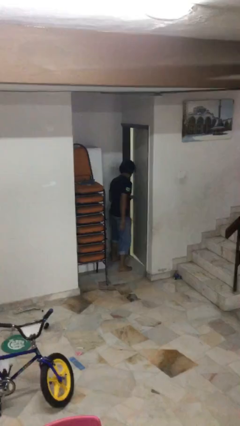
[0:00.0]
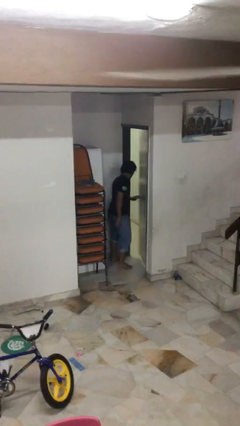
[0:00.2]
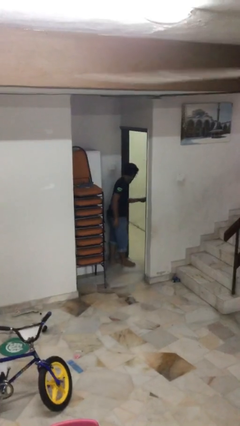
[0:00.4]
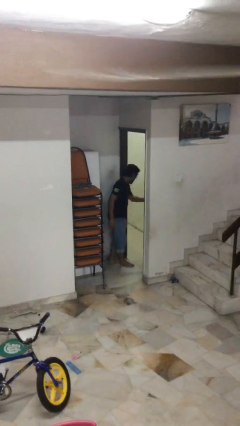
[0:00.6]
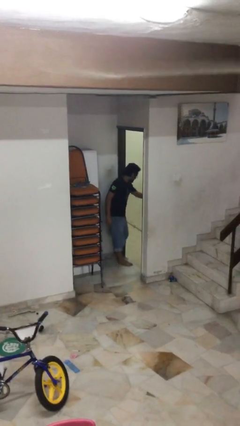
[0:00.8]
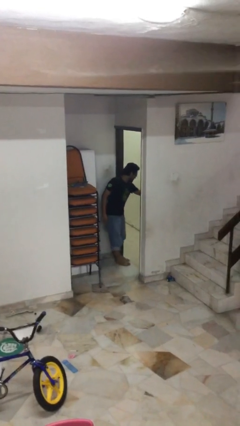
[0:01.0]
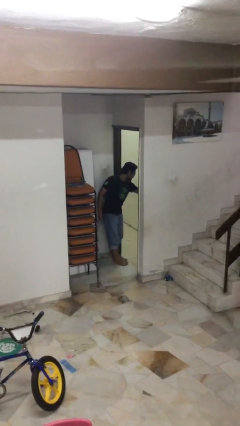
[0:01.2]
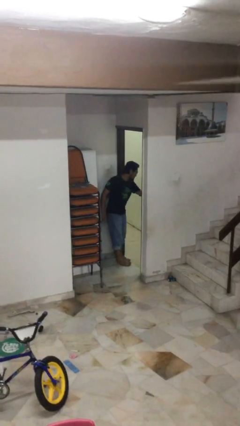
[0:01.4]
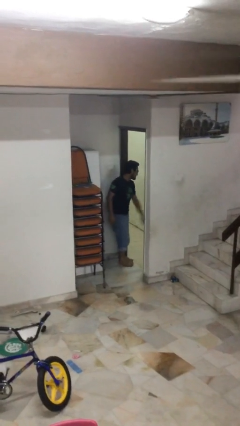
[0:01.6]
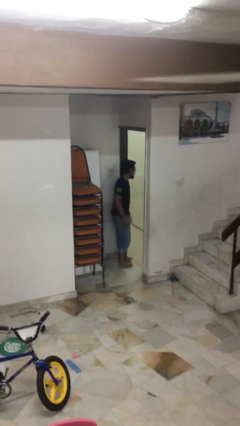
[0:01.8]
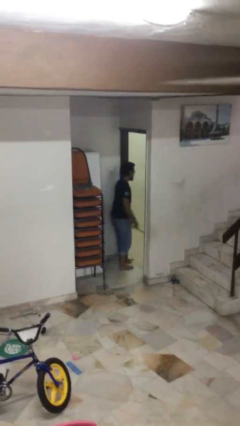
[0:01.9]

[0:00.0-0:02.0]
person opens facility door

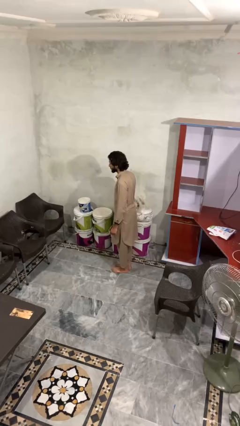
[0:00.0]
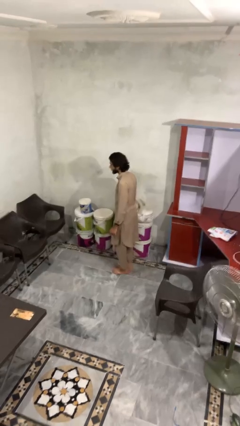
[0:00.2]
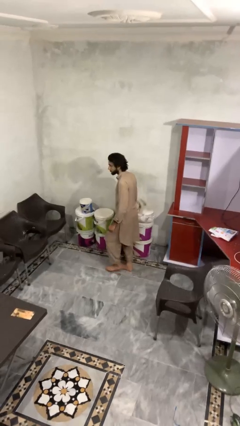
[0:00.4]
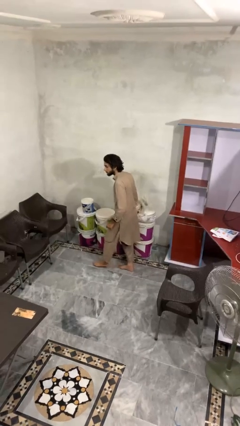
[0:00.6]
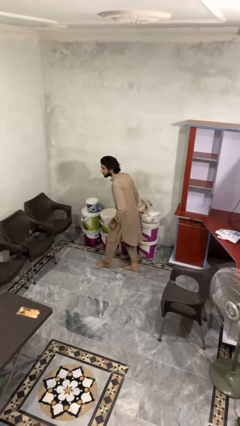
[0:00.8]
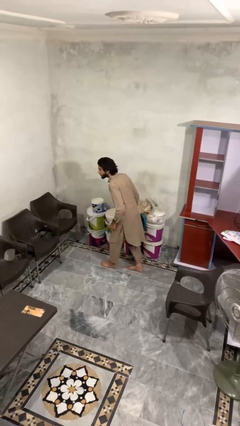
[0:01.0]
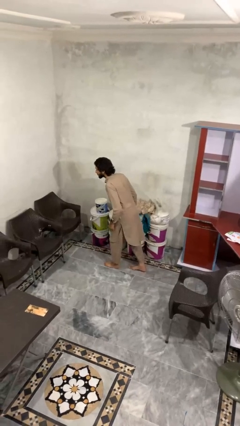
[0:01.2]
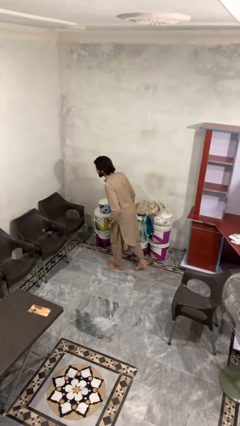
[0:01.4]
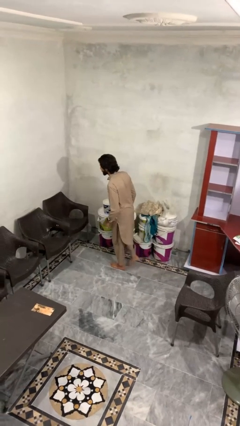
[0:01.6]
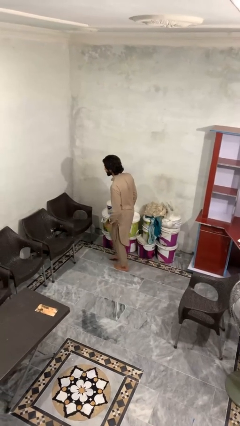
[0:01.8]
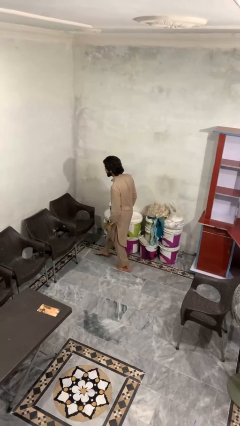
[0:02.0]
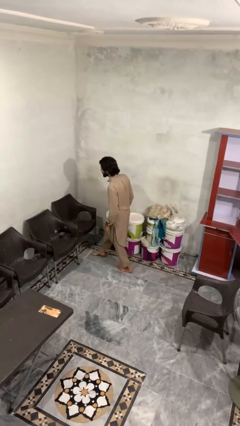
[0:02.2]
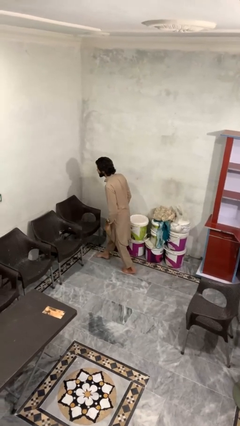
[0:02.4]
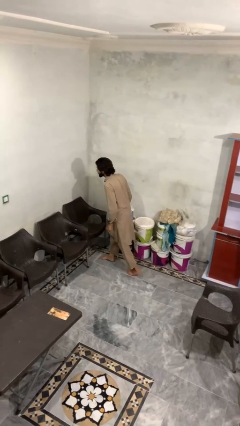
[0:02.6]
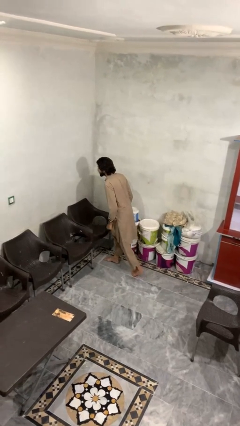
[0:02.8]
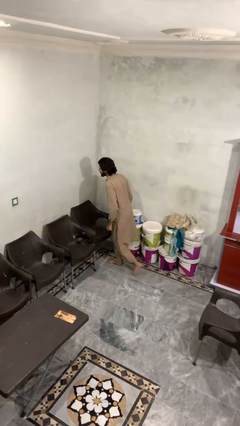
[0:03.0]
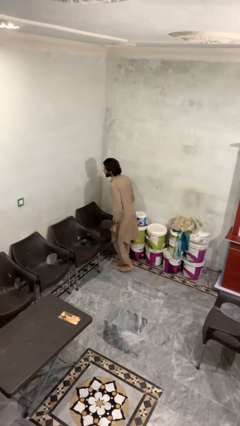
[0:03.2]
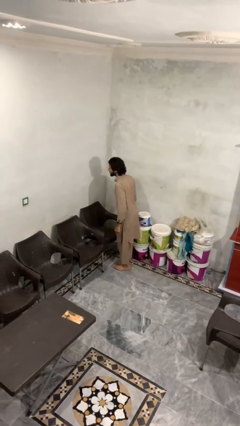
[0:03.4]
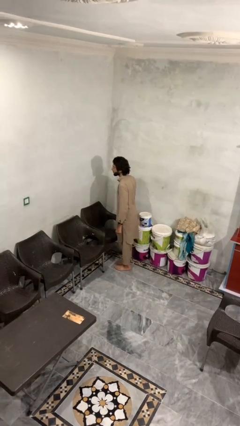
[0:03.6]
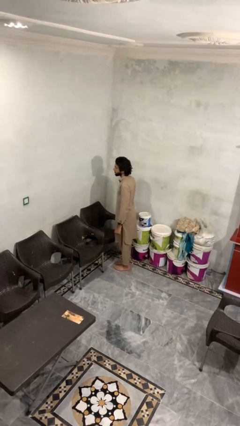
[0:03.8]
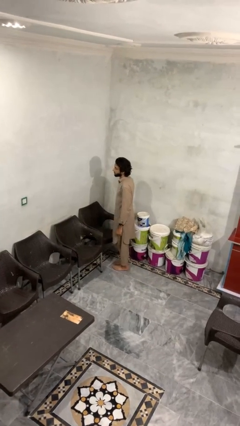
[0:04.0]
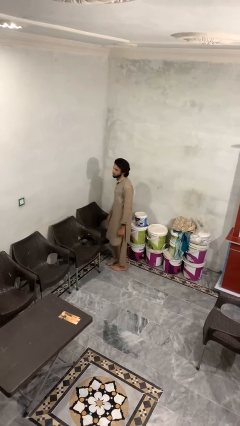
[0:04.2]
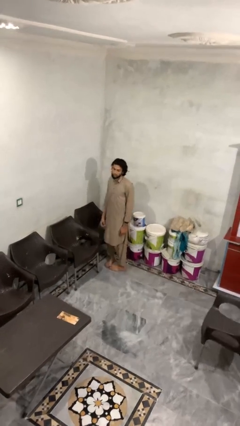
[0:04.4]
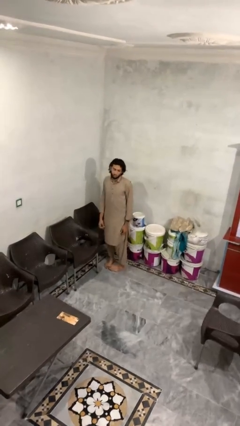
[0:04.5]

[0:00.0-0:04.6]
person walks tiptoe

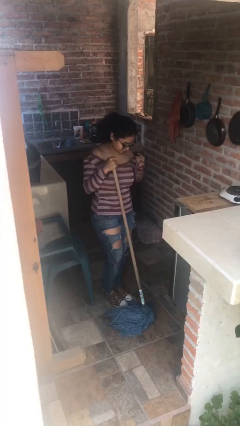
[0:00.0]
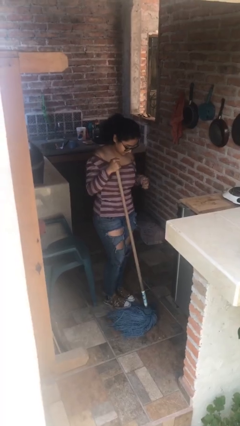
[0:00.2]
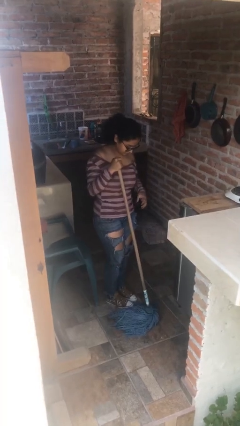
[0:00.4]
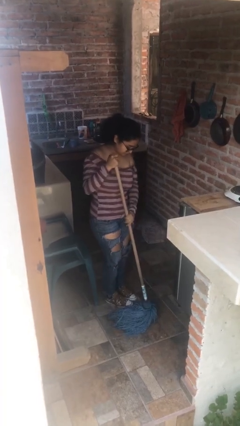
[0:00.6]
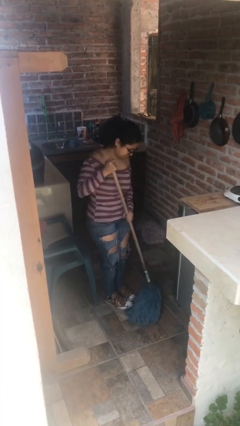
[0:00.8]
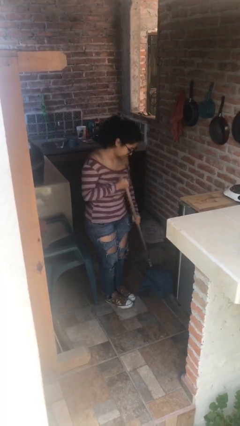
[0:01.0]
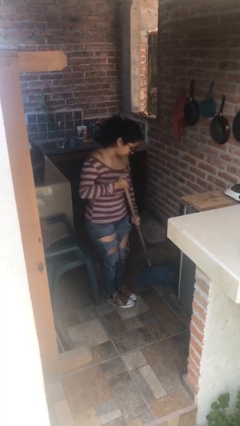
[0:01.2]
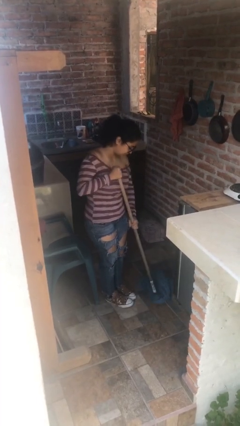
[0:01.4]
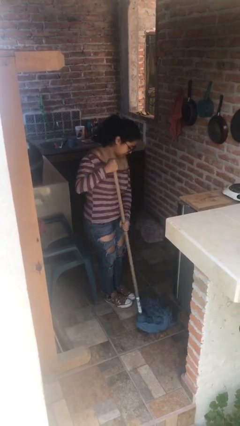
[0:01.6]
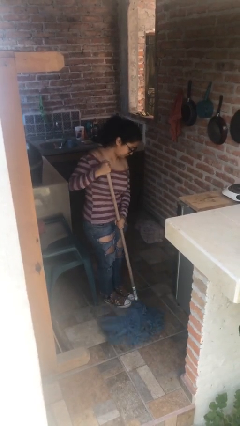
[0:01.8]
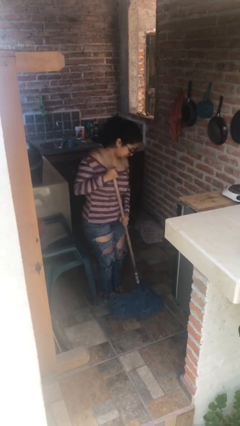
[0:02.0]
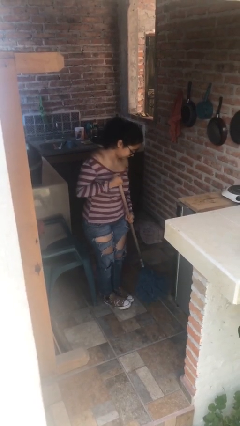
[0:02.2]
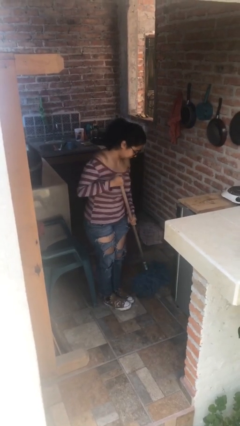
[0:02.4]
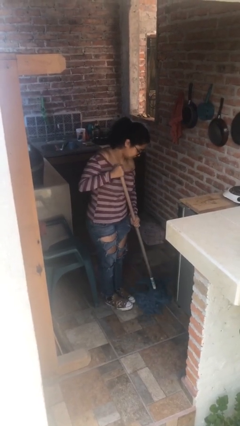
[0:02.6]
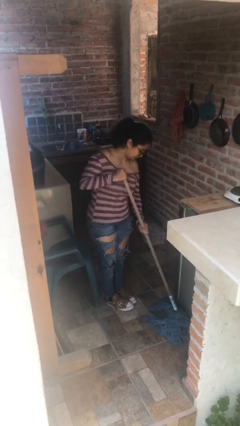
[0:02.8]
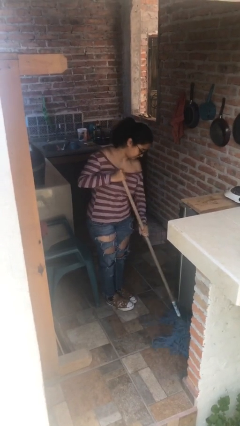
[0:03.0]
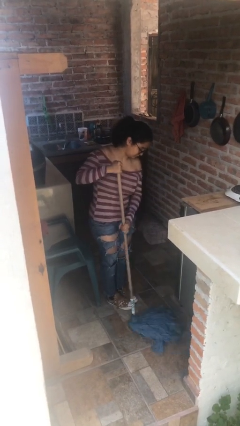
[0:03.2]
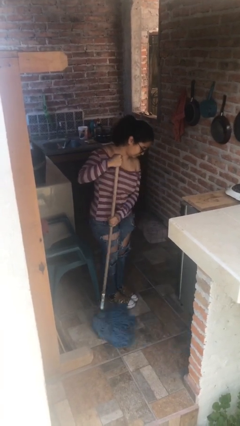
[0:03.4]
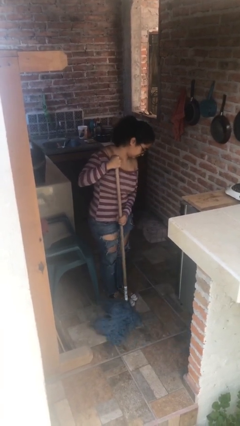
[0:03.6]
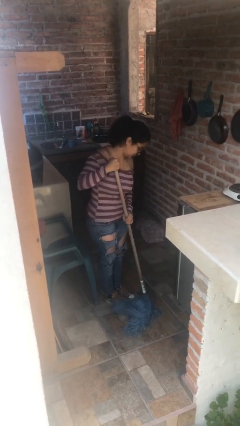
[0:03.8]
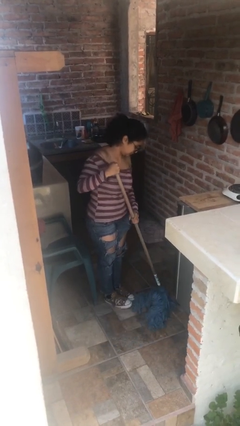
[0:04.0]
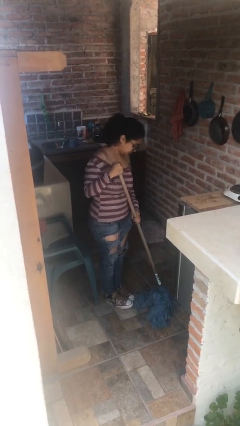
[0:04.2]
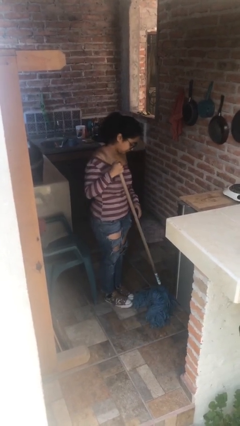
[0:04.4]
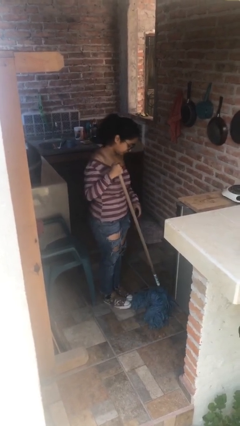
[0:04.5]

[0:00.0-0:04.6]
person mops

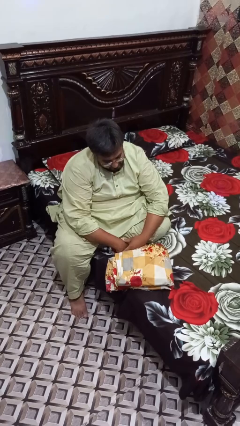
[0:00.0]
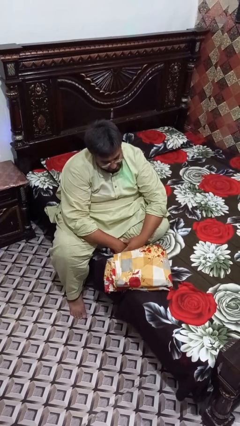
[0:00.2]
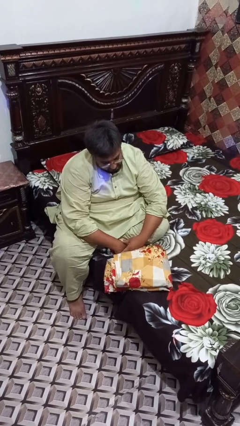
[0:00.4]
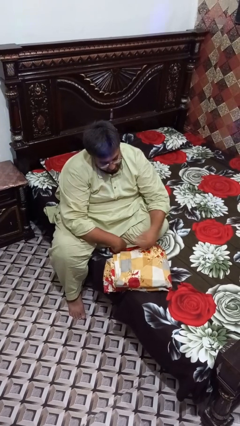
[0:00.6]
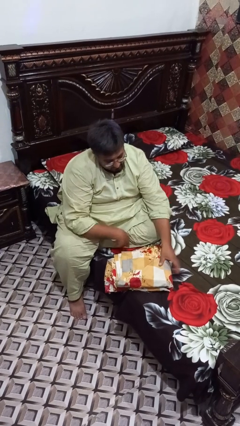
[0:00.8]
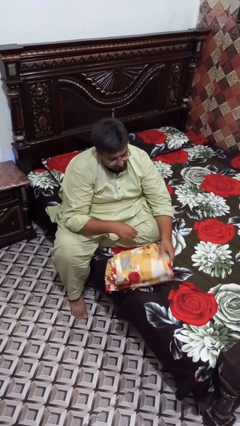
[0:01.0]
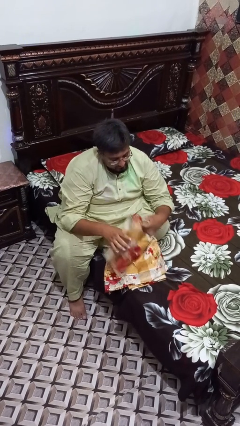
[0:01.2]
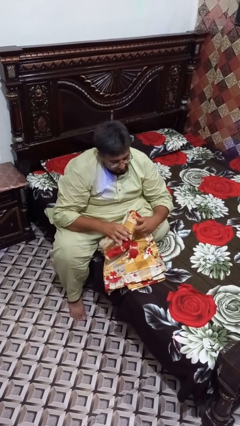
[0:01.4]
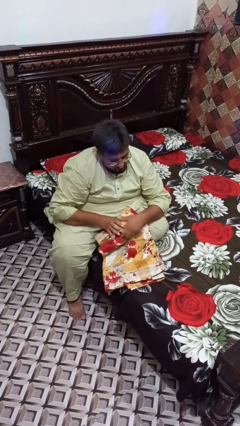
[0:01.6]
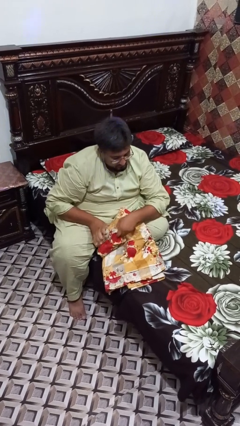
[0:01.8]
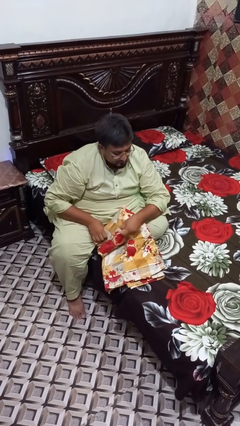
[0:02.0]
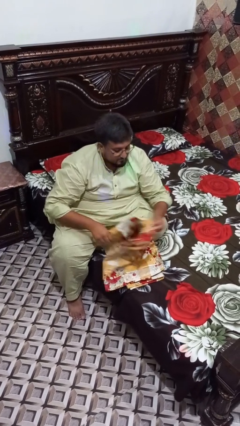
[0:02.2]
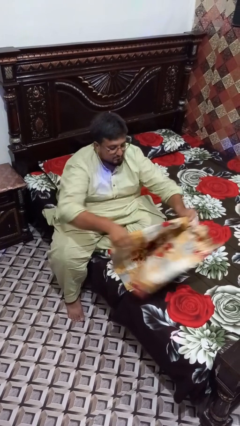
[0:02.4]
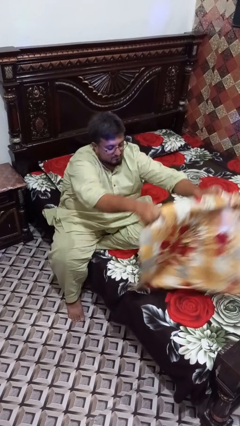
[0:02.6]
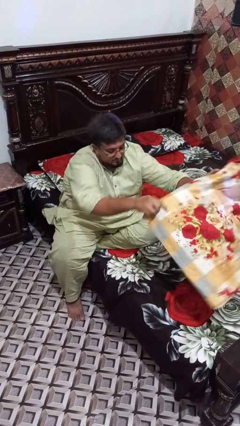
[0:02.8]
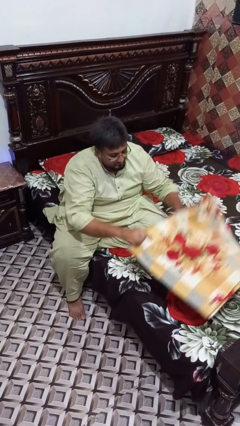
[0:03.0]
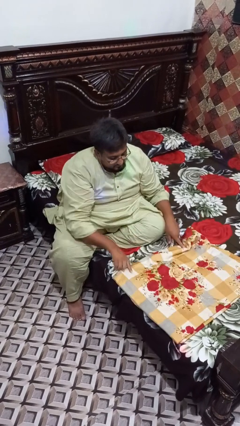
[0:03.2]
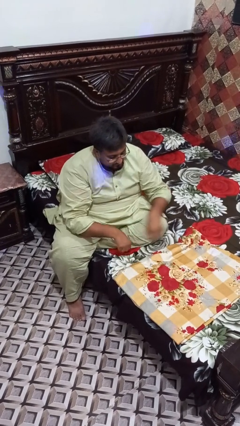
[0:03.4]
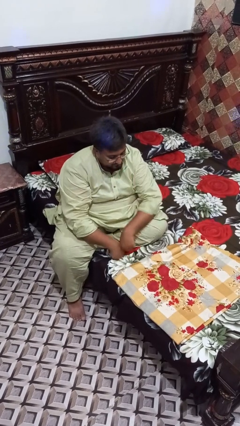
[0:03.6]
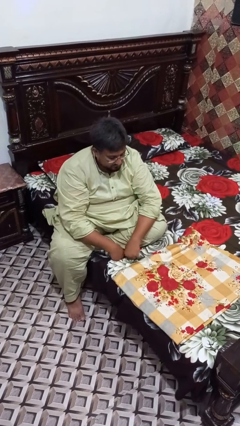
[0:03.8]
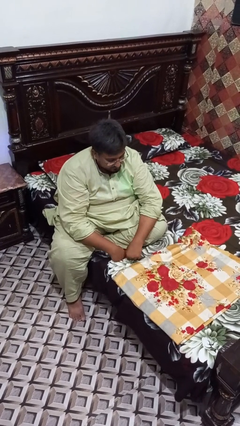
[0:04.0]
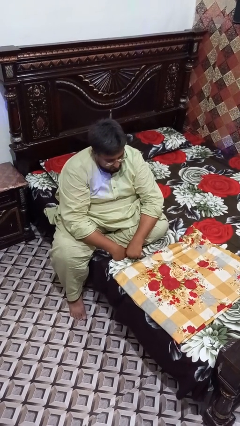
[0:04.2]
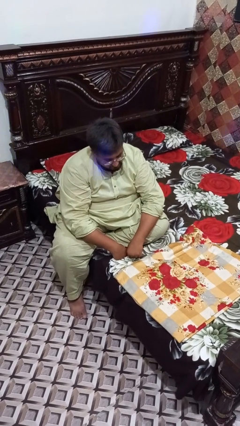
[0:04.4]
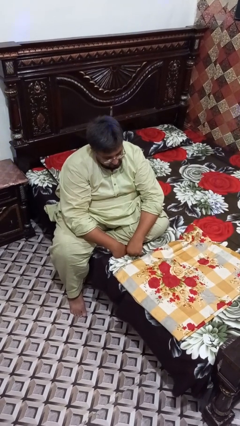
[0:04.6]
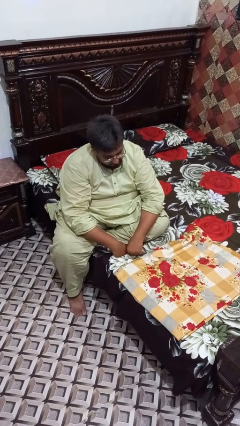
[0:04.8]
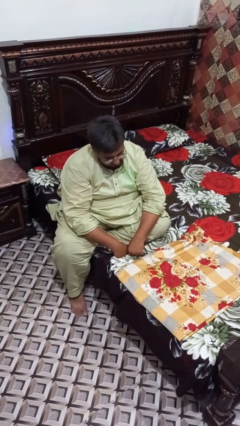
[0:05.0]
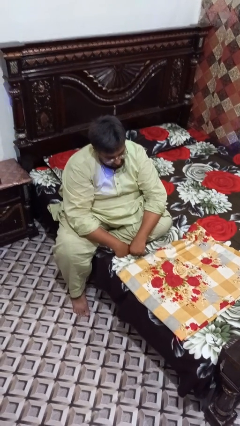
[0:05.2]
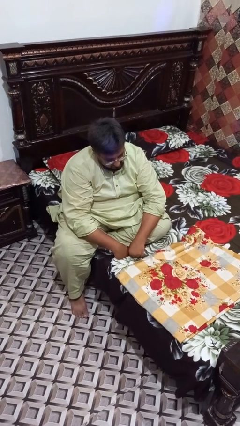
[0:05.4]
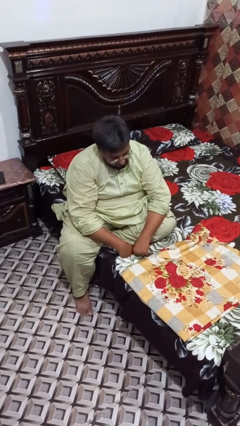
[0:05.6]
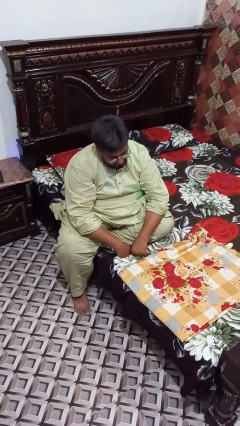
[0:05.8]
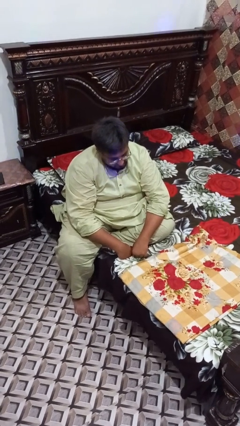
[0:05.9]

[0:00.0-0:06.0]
person unfolds blanket

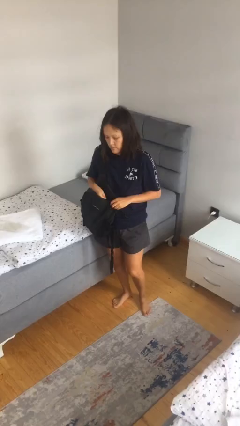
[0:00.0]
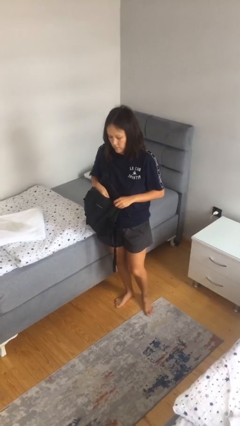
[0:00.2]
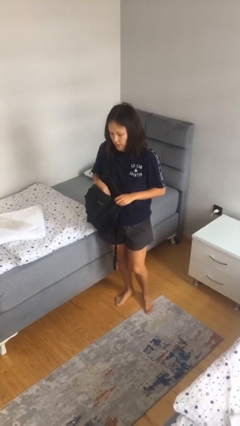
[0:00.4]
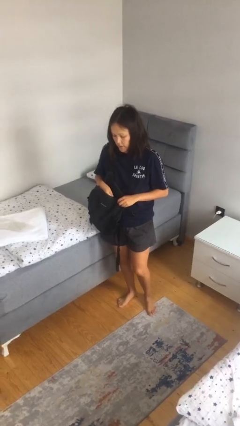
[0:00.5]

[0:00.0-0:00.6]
person takes object from backpack
